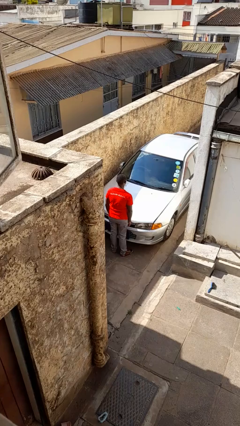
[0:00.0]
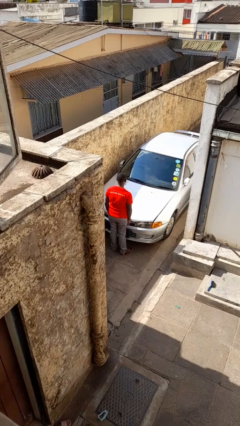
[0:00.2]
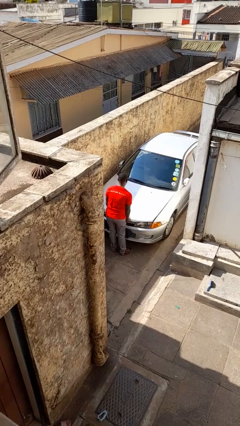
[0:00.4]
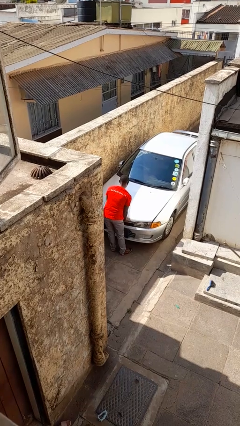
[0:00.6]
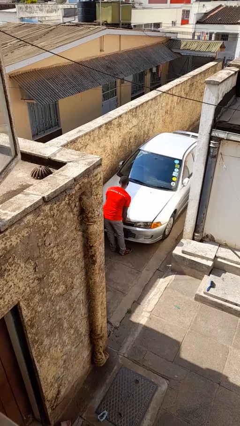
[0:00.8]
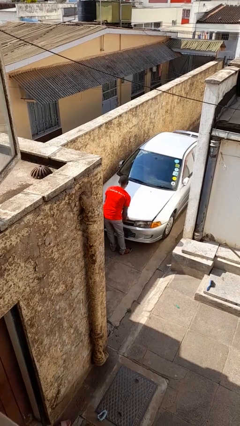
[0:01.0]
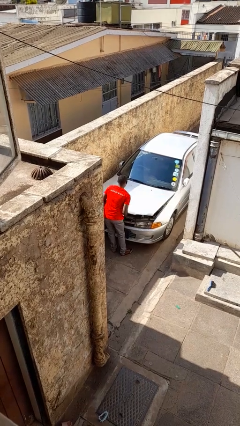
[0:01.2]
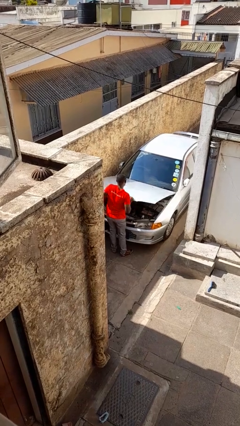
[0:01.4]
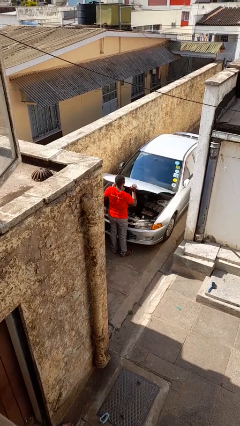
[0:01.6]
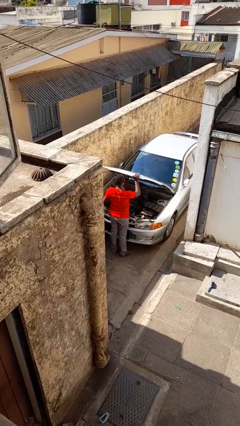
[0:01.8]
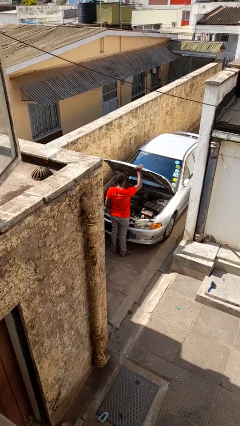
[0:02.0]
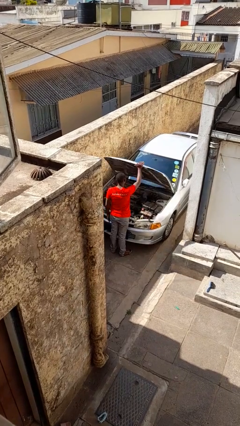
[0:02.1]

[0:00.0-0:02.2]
person opens car hood

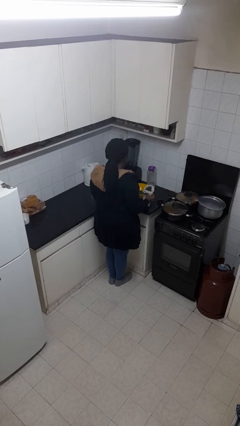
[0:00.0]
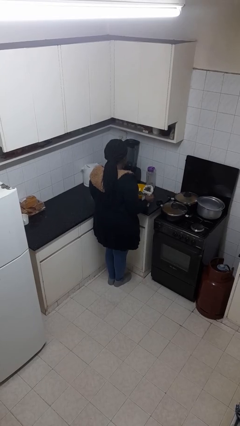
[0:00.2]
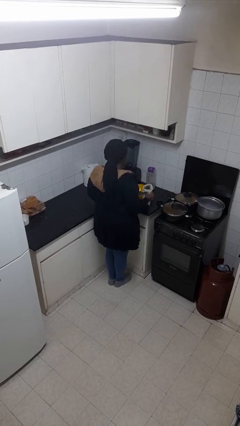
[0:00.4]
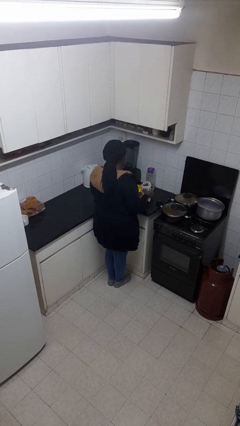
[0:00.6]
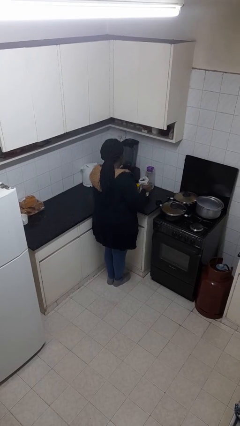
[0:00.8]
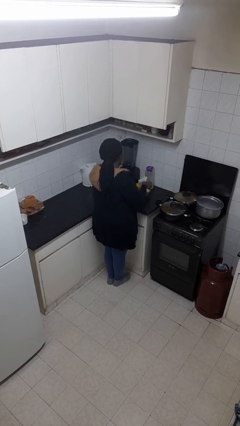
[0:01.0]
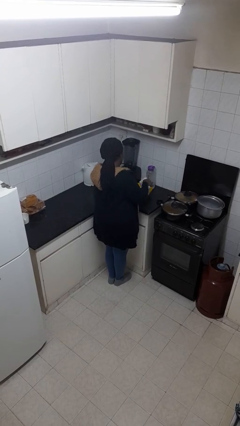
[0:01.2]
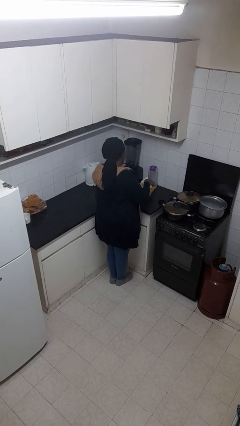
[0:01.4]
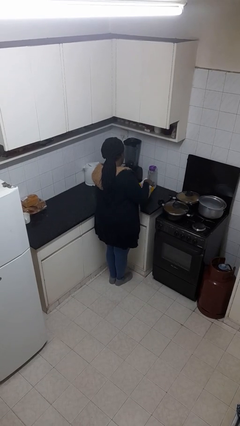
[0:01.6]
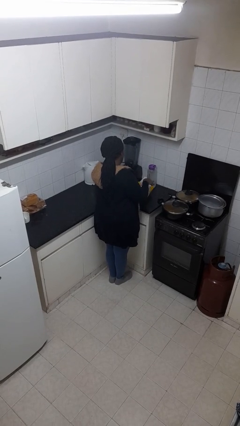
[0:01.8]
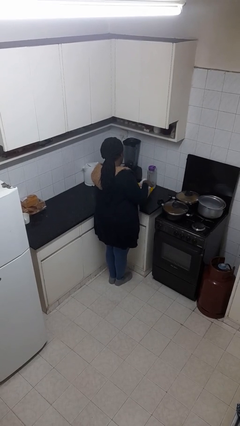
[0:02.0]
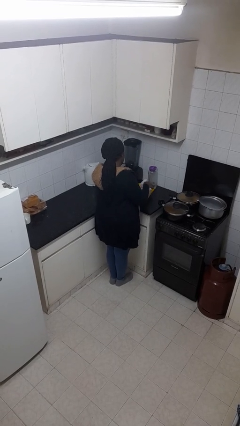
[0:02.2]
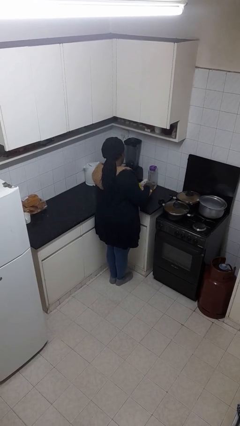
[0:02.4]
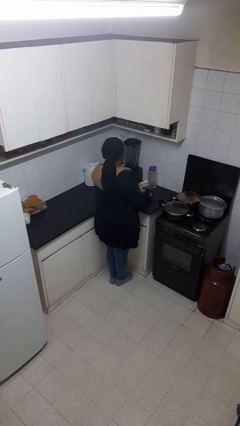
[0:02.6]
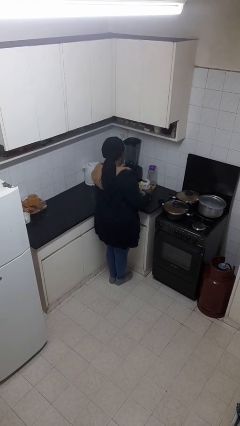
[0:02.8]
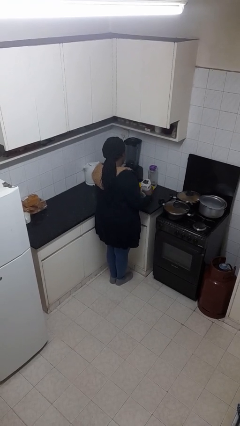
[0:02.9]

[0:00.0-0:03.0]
person pours into bowl

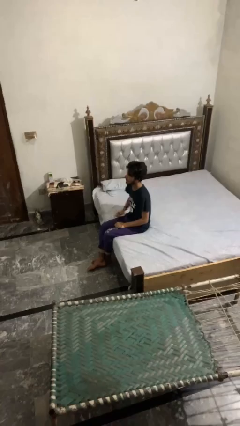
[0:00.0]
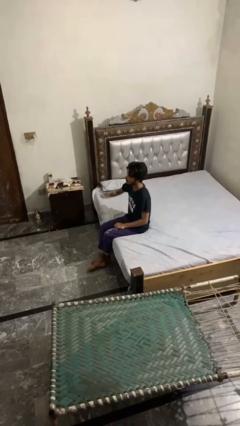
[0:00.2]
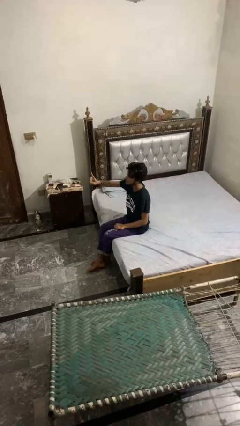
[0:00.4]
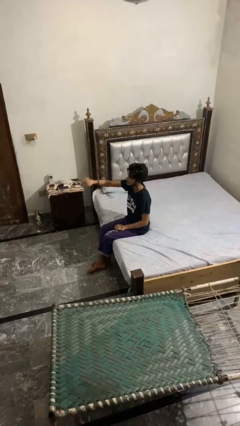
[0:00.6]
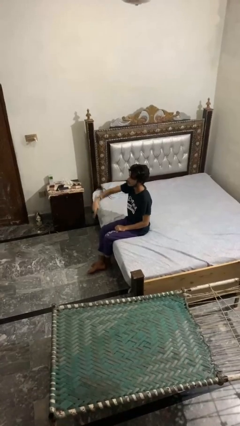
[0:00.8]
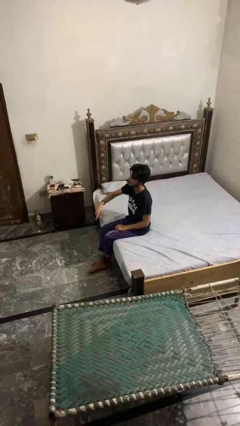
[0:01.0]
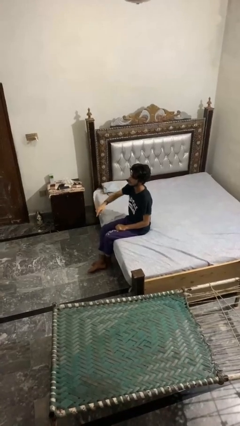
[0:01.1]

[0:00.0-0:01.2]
person gestures swipe down

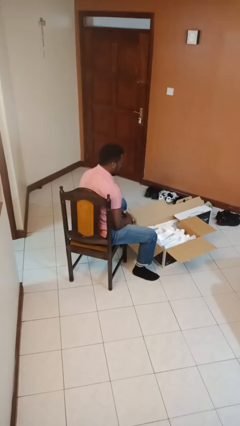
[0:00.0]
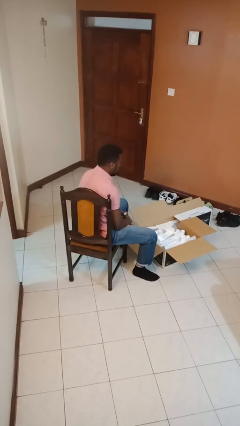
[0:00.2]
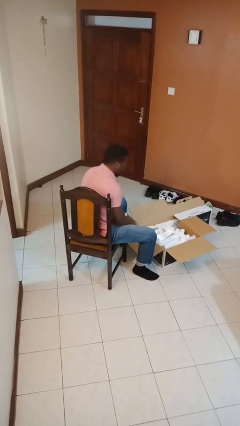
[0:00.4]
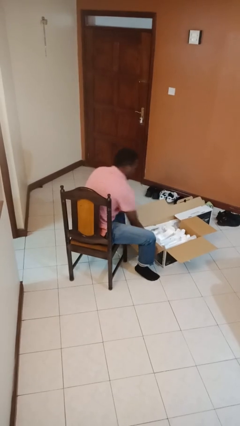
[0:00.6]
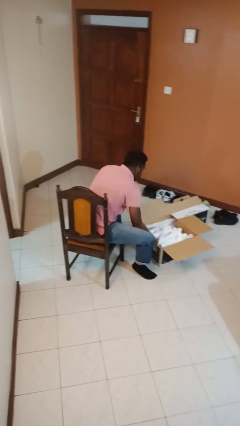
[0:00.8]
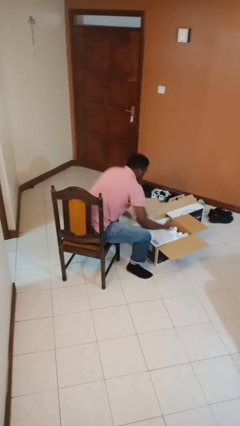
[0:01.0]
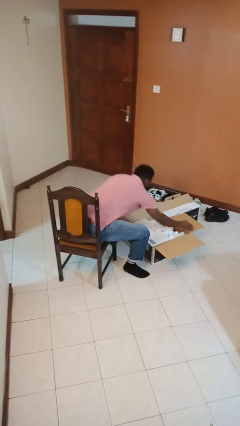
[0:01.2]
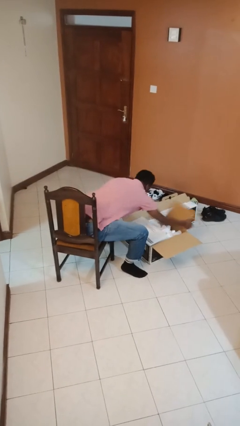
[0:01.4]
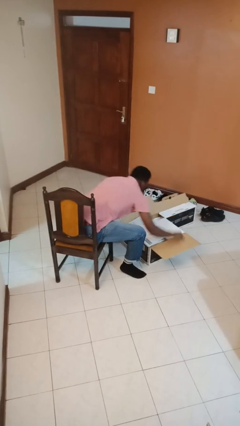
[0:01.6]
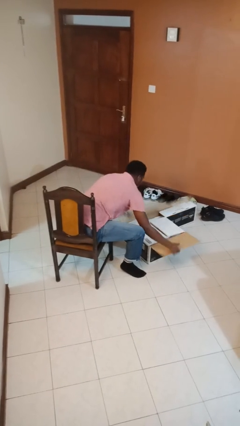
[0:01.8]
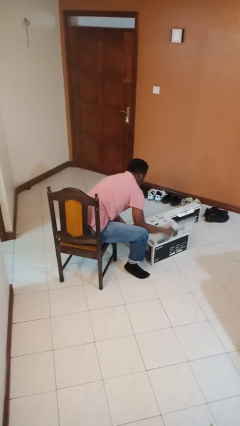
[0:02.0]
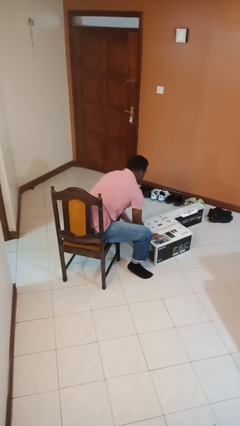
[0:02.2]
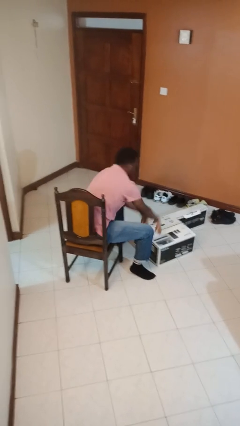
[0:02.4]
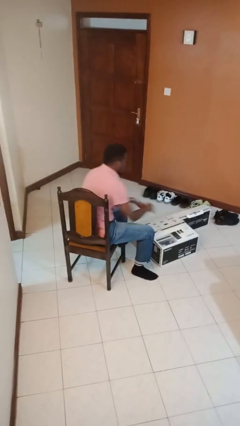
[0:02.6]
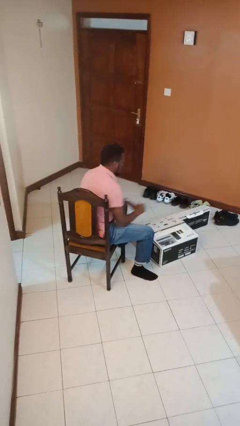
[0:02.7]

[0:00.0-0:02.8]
person closes box

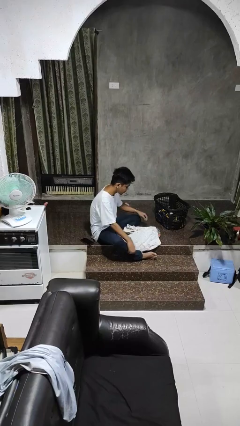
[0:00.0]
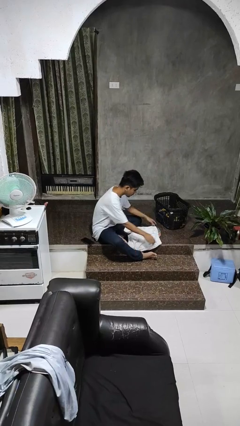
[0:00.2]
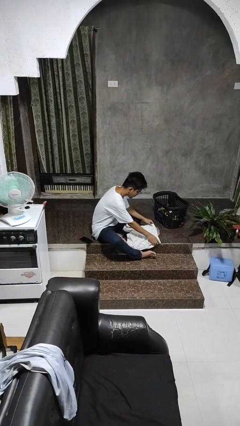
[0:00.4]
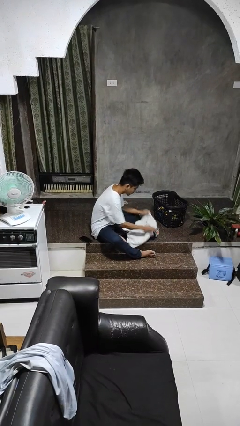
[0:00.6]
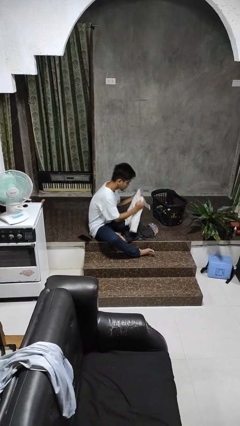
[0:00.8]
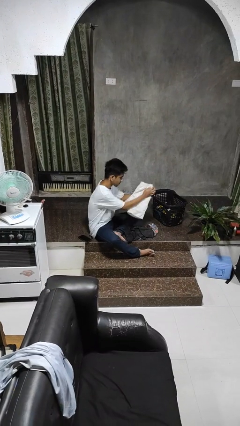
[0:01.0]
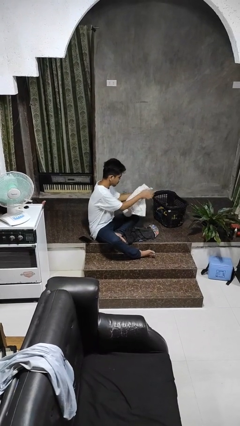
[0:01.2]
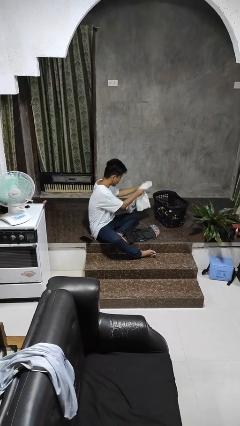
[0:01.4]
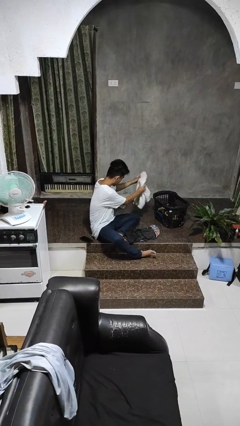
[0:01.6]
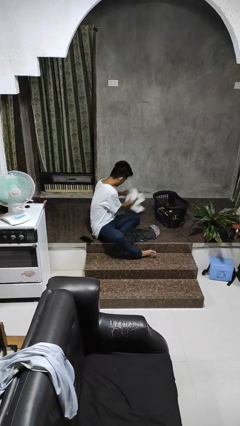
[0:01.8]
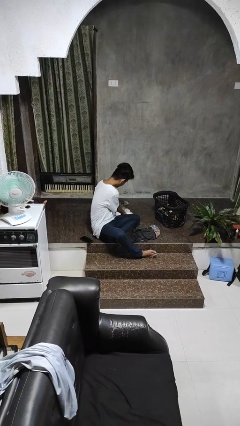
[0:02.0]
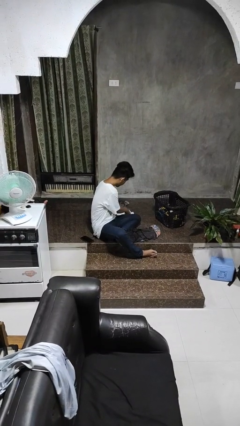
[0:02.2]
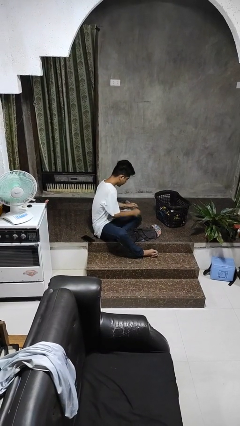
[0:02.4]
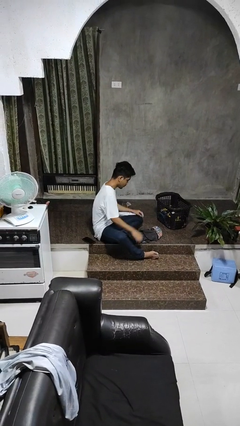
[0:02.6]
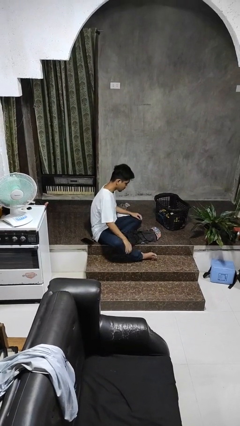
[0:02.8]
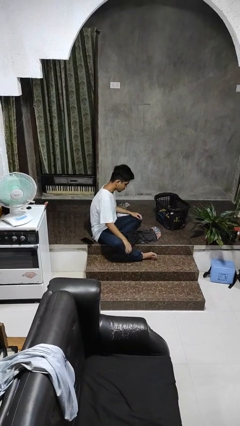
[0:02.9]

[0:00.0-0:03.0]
person folds pants

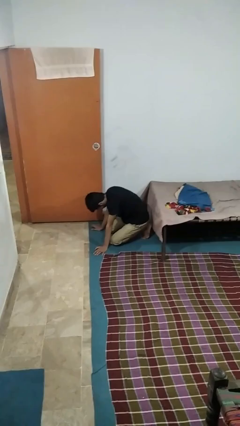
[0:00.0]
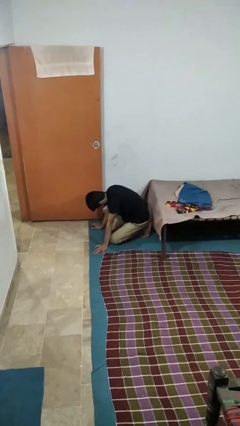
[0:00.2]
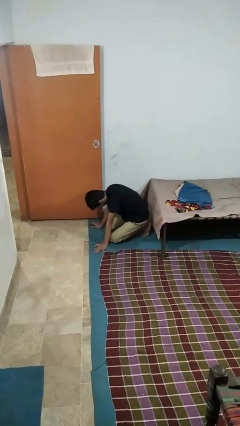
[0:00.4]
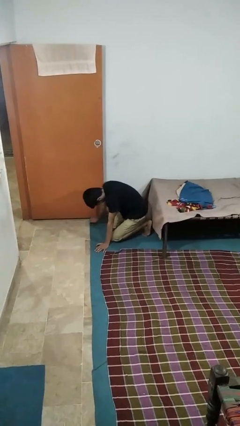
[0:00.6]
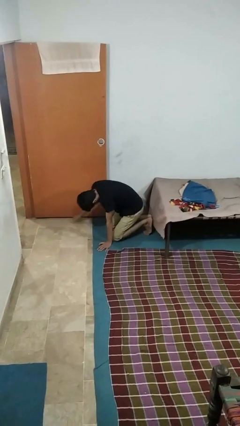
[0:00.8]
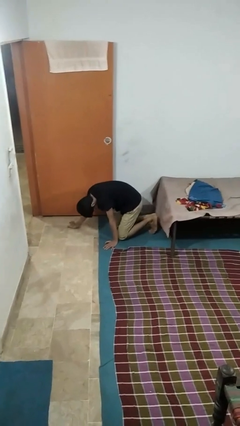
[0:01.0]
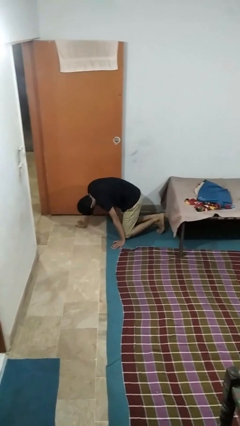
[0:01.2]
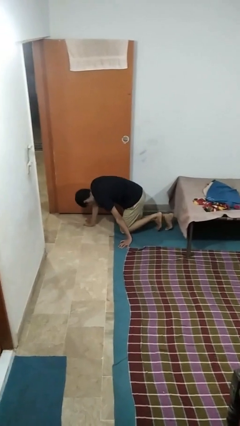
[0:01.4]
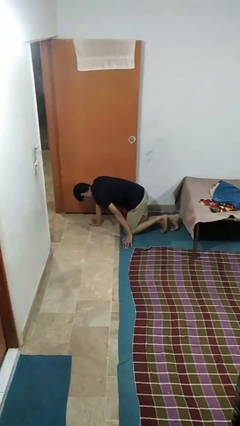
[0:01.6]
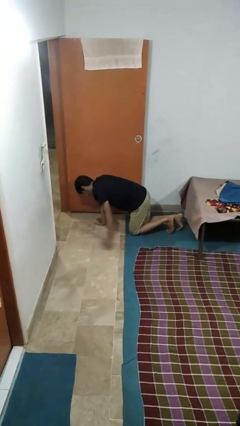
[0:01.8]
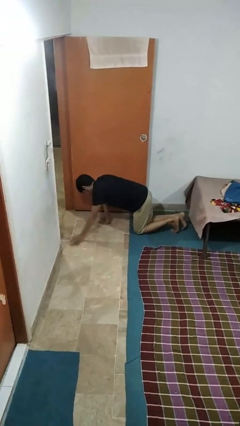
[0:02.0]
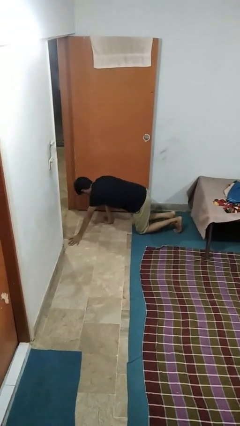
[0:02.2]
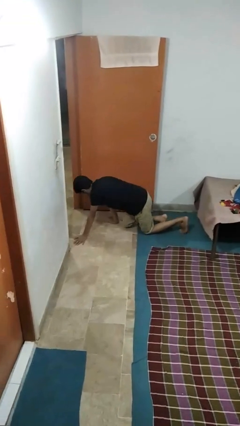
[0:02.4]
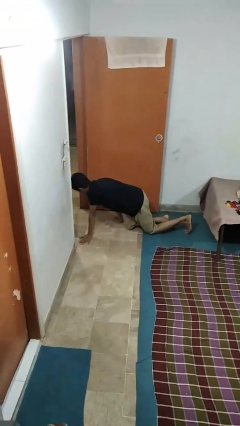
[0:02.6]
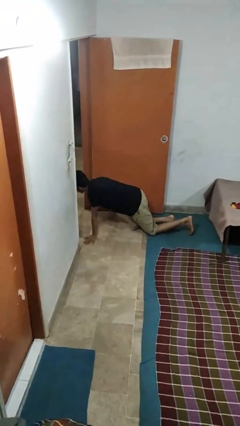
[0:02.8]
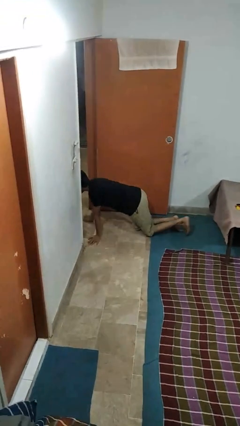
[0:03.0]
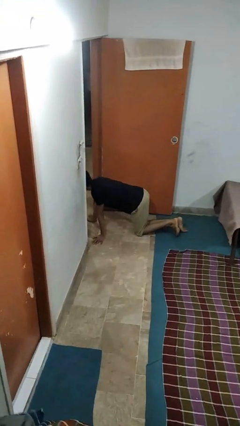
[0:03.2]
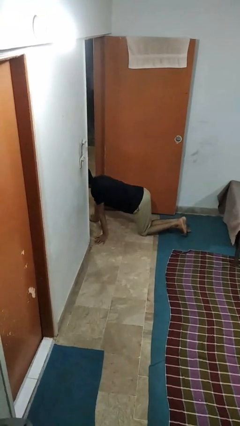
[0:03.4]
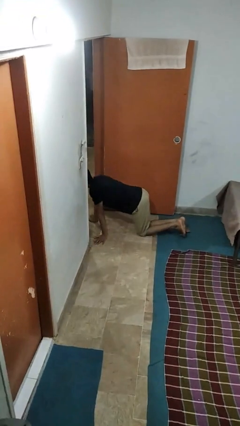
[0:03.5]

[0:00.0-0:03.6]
person crawls

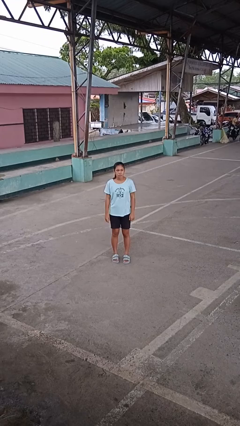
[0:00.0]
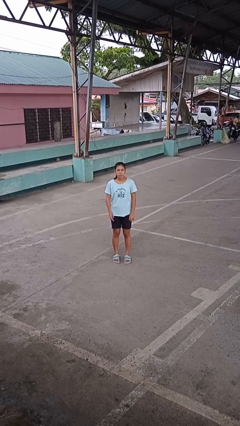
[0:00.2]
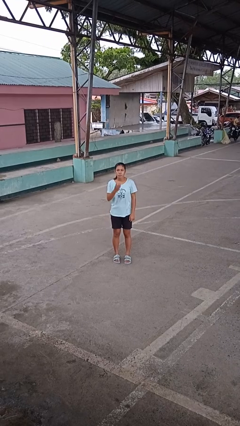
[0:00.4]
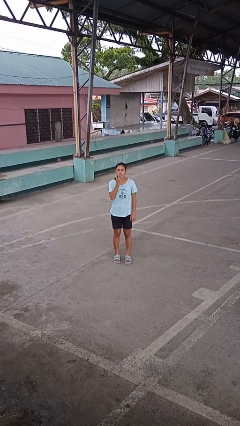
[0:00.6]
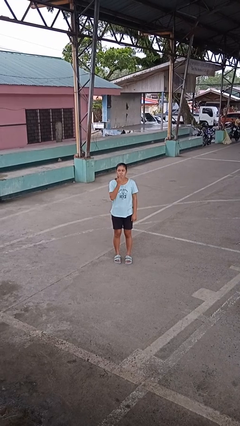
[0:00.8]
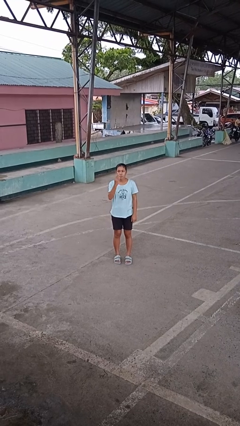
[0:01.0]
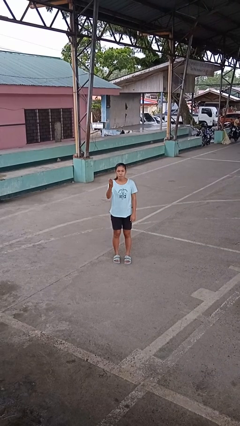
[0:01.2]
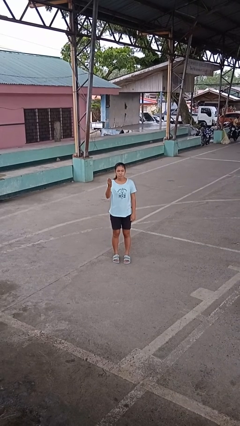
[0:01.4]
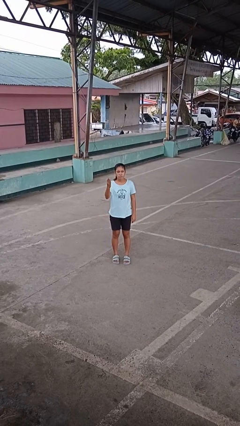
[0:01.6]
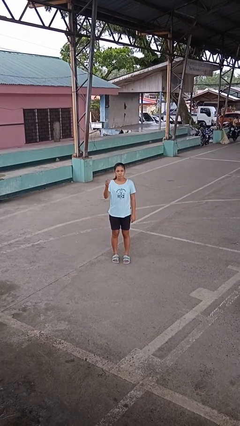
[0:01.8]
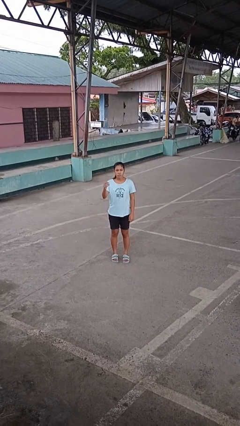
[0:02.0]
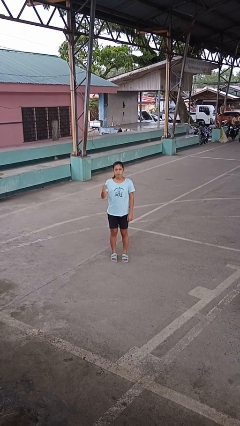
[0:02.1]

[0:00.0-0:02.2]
person gestures blow kiss
